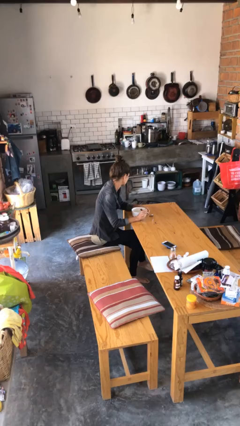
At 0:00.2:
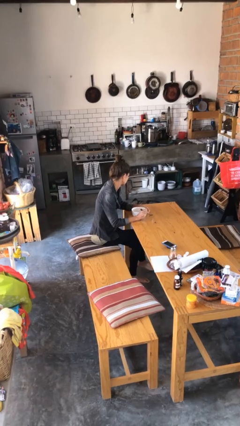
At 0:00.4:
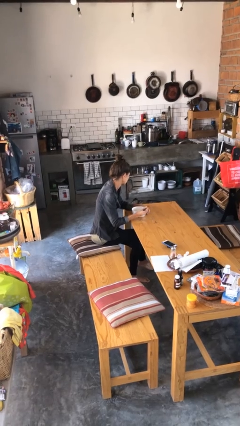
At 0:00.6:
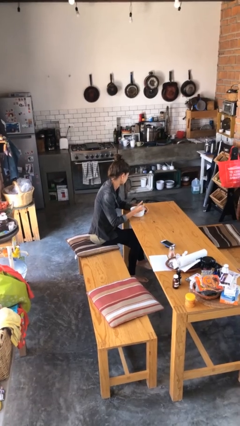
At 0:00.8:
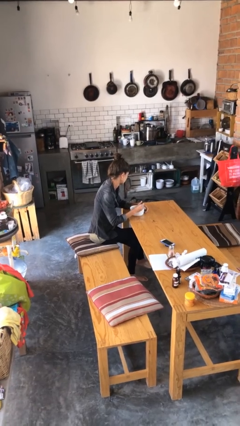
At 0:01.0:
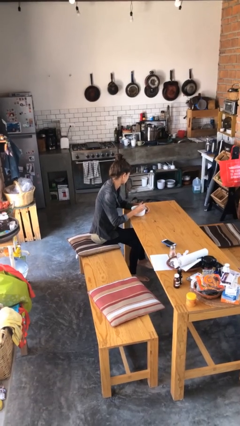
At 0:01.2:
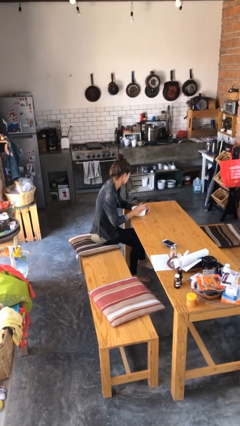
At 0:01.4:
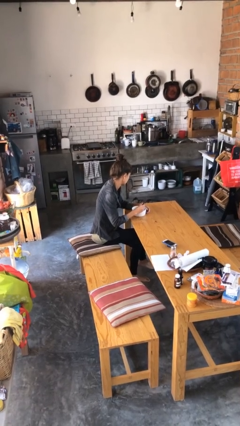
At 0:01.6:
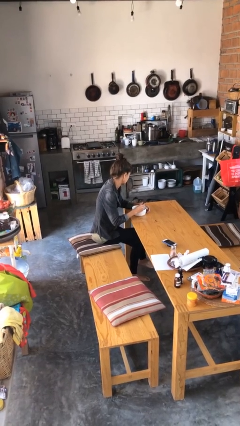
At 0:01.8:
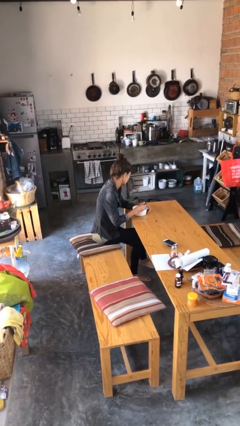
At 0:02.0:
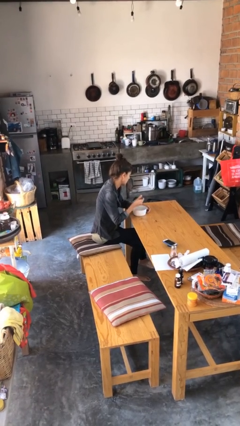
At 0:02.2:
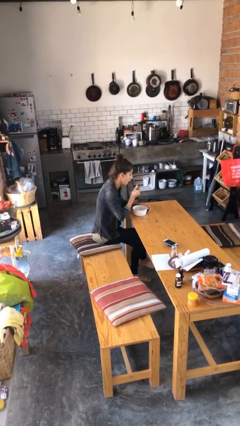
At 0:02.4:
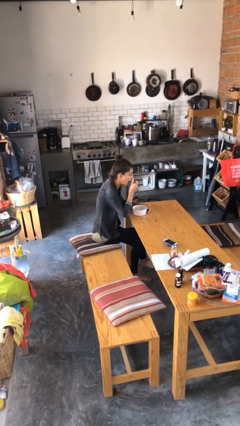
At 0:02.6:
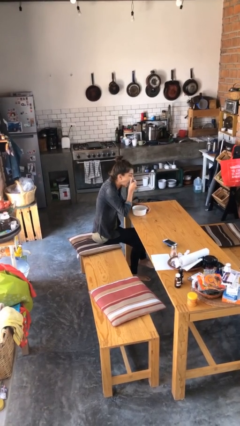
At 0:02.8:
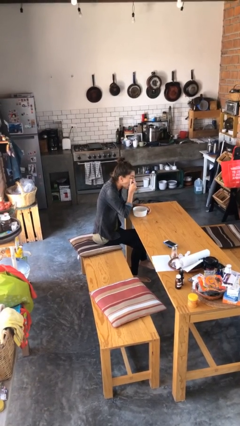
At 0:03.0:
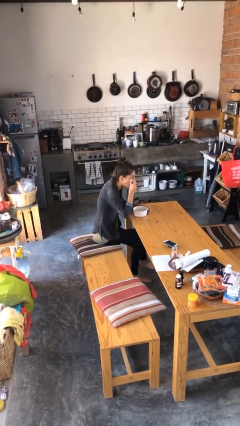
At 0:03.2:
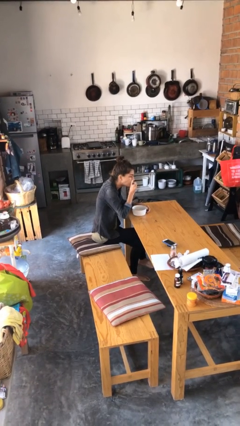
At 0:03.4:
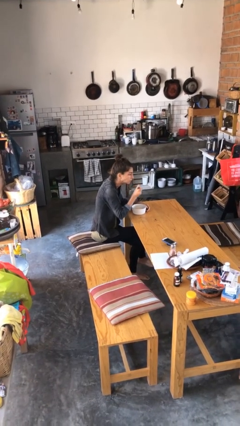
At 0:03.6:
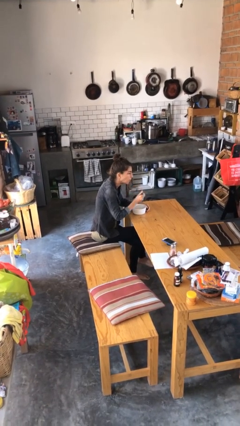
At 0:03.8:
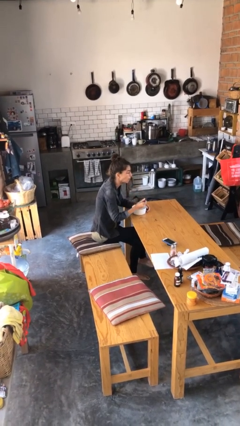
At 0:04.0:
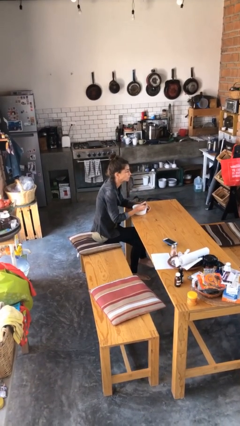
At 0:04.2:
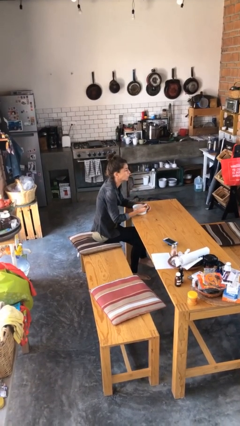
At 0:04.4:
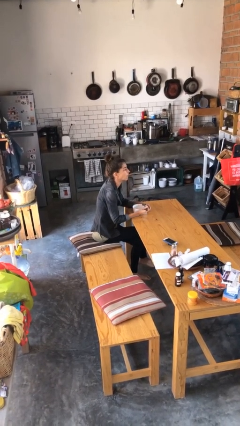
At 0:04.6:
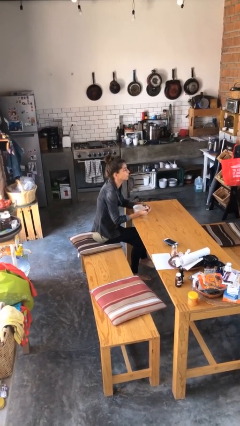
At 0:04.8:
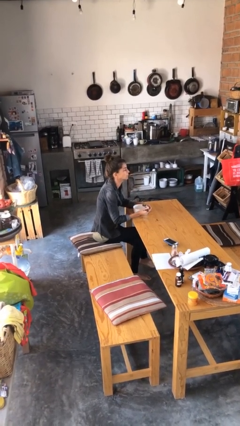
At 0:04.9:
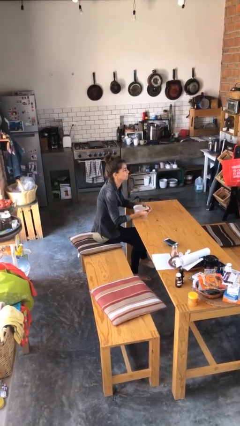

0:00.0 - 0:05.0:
person eats with utensil

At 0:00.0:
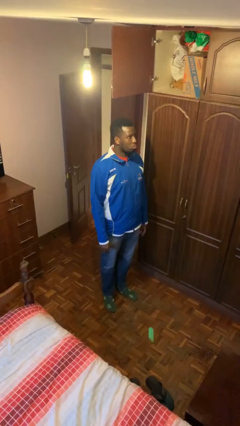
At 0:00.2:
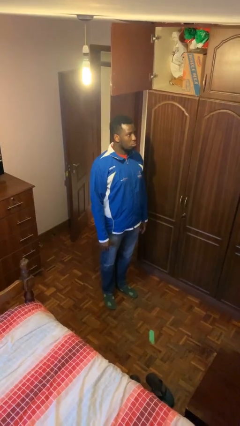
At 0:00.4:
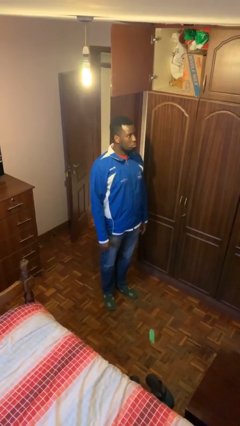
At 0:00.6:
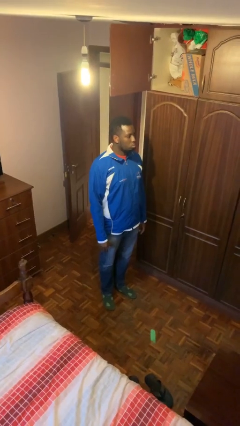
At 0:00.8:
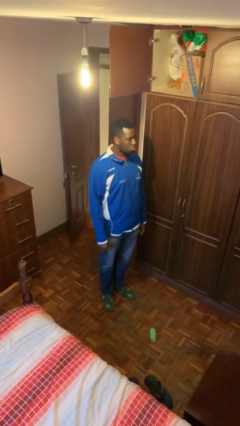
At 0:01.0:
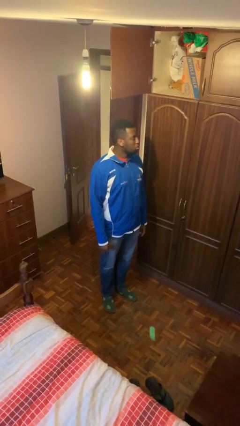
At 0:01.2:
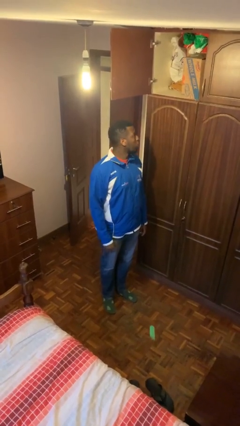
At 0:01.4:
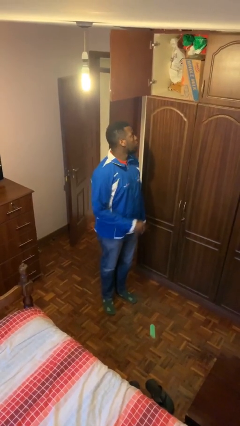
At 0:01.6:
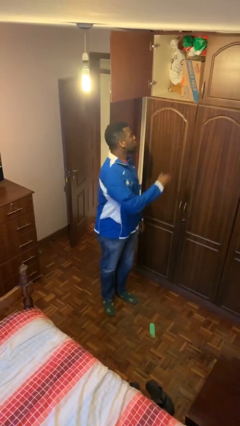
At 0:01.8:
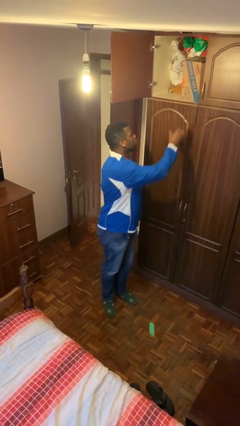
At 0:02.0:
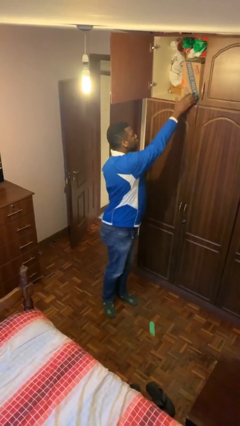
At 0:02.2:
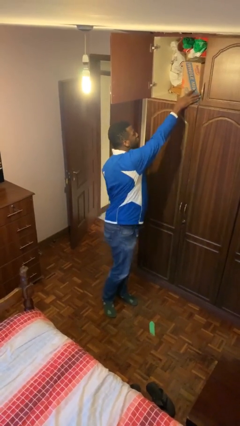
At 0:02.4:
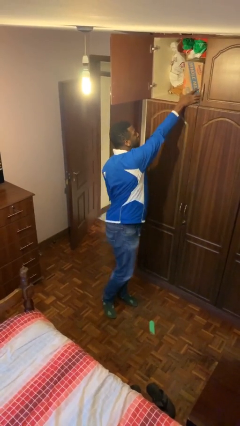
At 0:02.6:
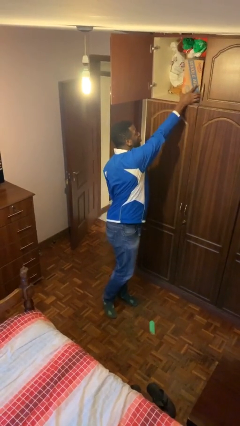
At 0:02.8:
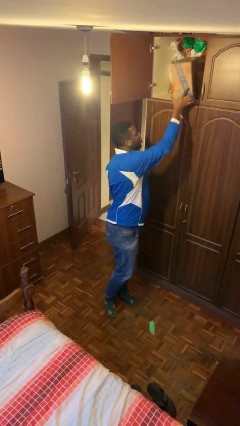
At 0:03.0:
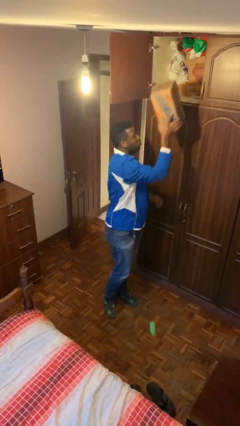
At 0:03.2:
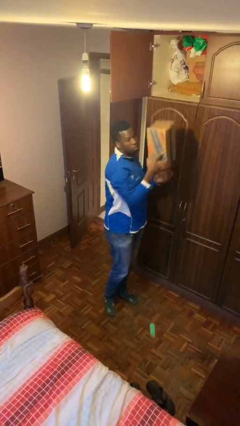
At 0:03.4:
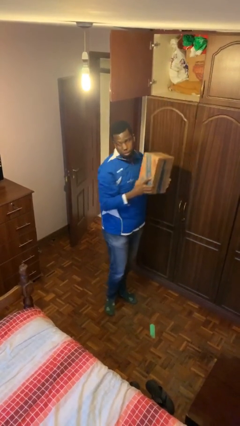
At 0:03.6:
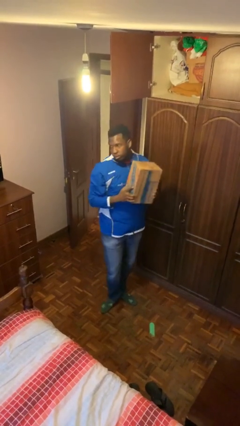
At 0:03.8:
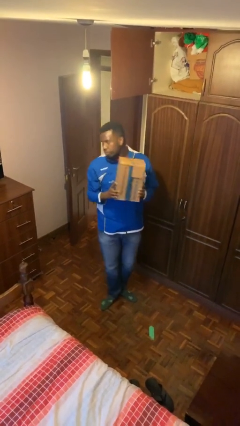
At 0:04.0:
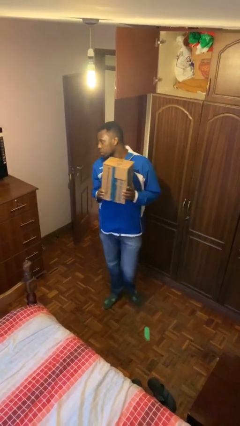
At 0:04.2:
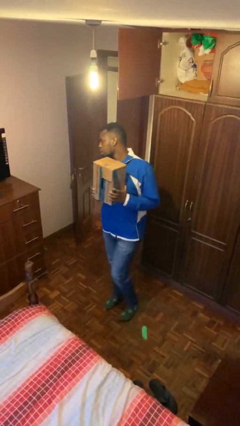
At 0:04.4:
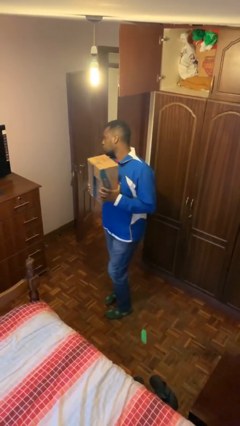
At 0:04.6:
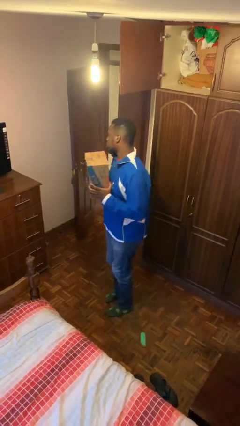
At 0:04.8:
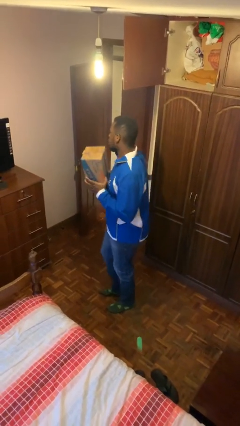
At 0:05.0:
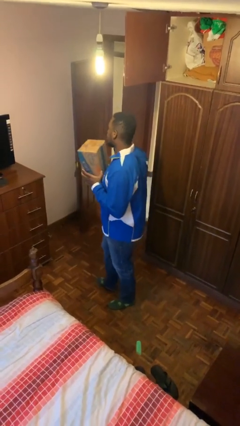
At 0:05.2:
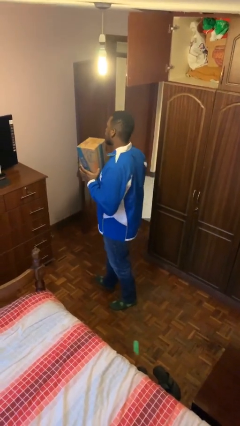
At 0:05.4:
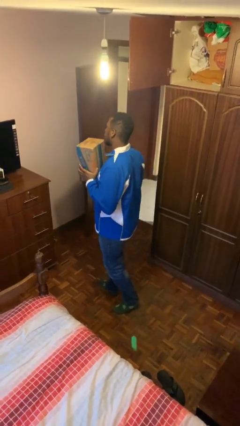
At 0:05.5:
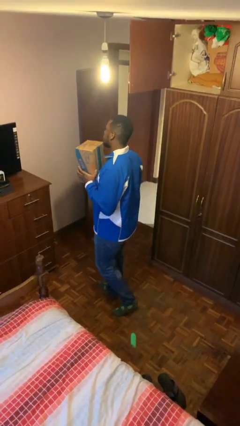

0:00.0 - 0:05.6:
person picks up object from shelf

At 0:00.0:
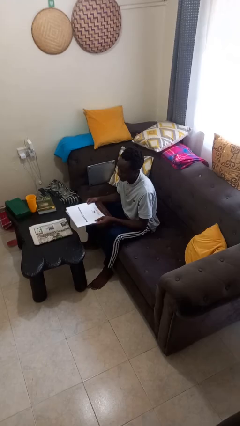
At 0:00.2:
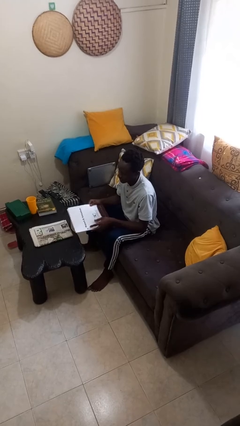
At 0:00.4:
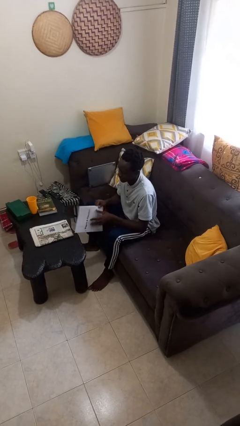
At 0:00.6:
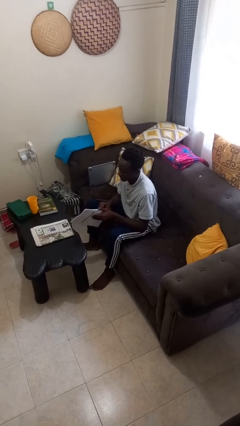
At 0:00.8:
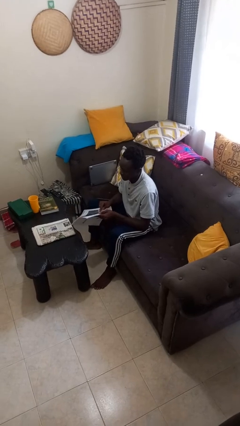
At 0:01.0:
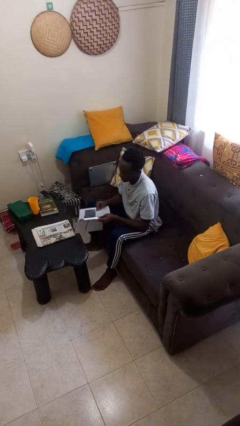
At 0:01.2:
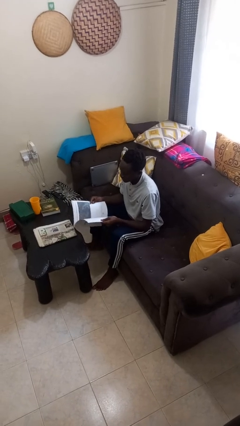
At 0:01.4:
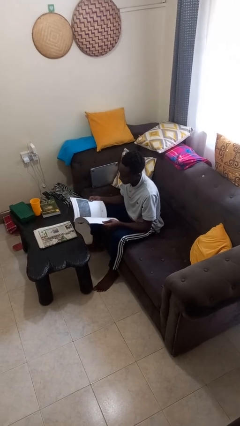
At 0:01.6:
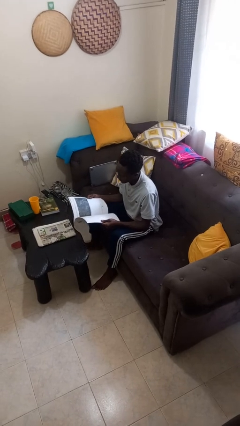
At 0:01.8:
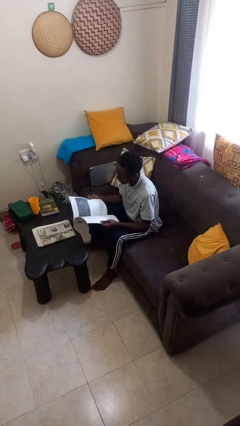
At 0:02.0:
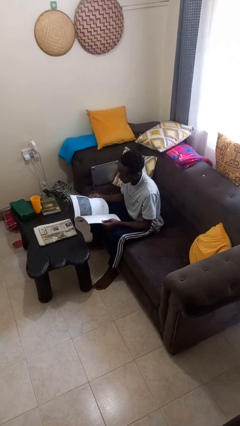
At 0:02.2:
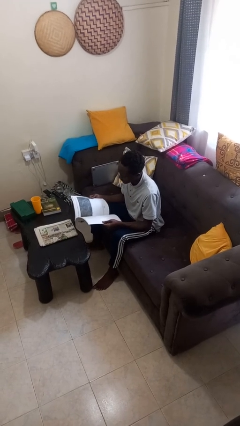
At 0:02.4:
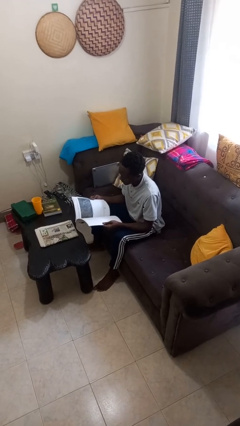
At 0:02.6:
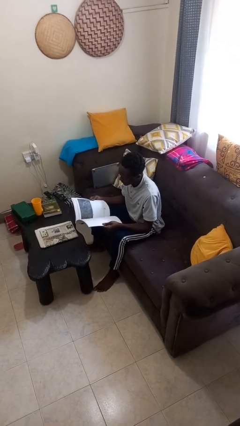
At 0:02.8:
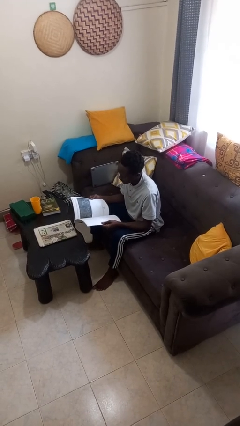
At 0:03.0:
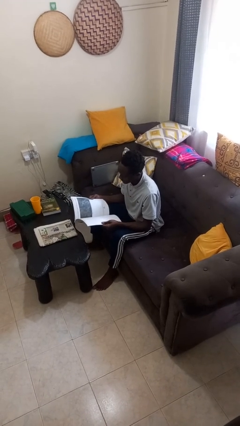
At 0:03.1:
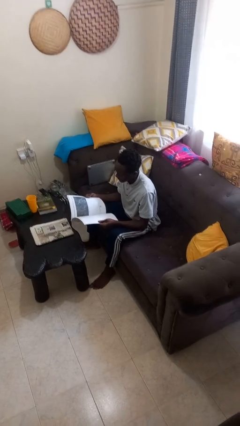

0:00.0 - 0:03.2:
person reads magazine

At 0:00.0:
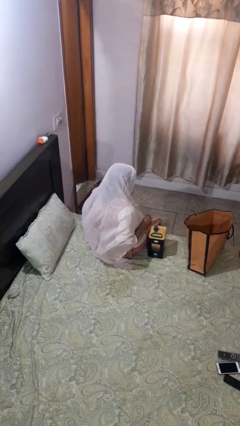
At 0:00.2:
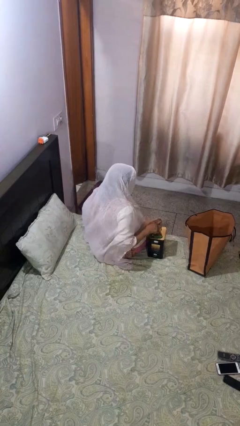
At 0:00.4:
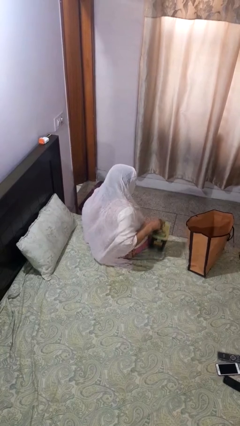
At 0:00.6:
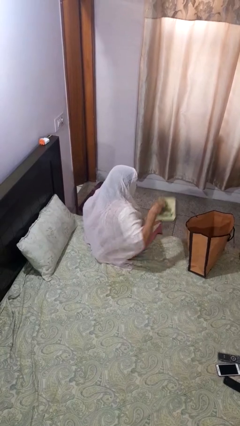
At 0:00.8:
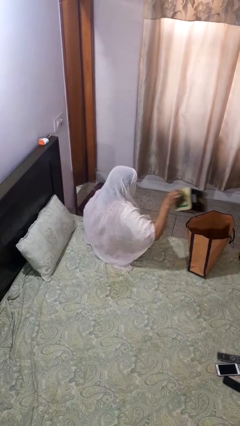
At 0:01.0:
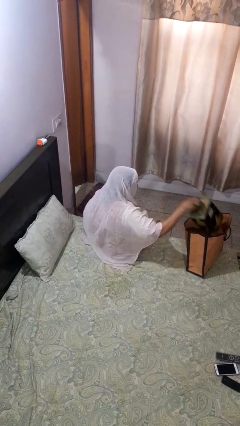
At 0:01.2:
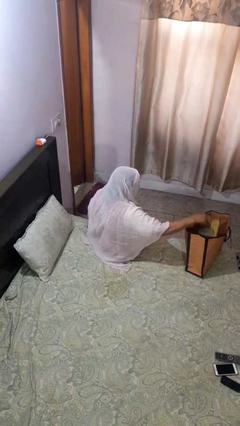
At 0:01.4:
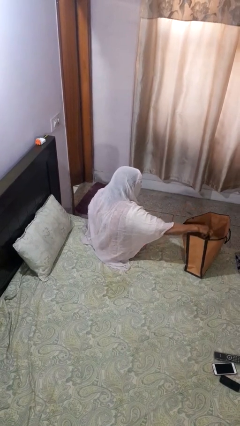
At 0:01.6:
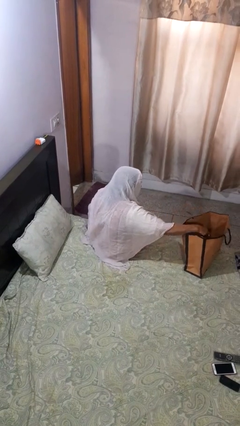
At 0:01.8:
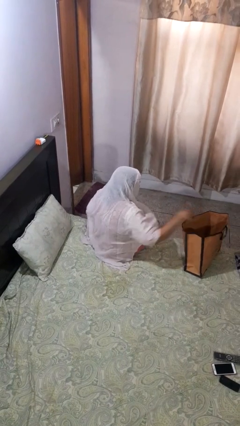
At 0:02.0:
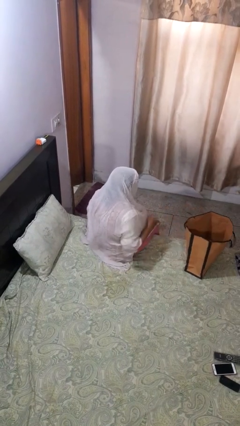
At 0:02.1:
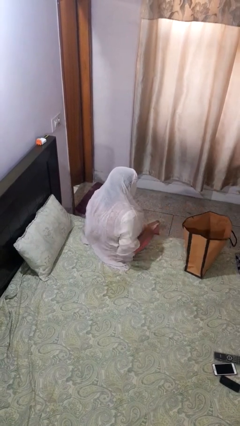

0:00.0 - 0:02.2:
person puts object into bag

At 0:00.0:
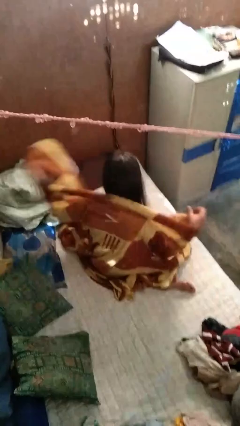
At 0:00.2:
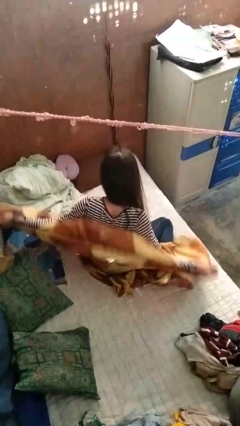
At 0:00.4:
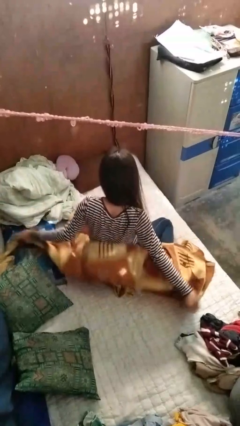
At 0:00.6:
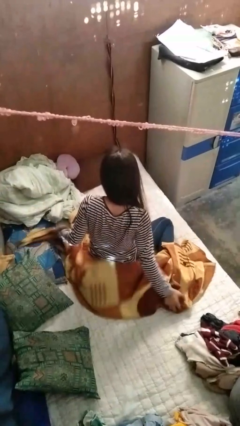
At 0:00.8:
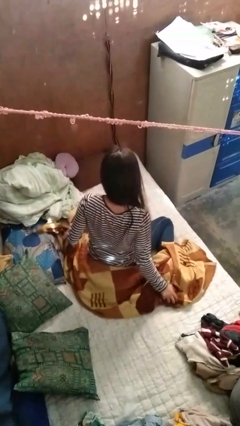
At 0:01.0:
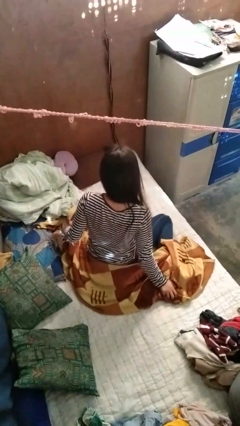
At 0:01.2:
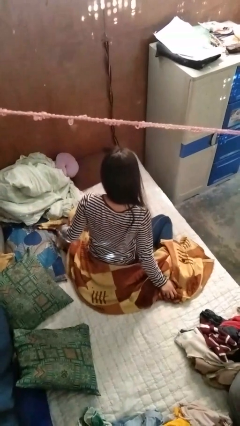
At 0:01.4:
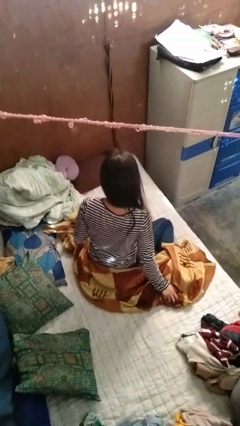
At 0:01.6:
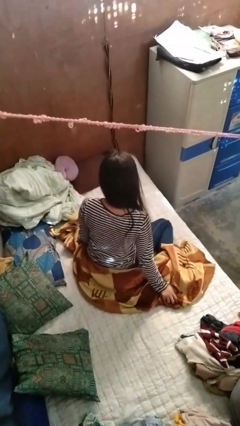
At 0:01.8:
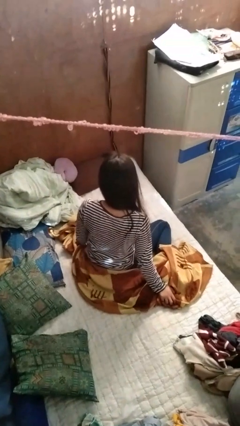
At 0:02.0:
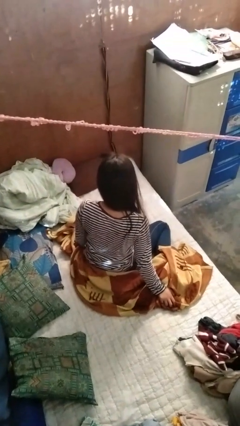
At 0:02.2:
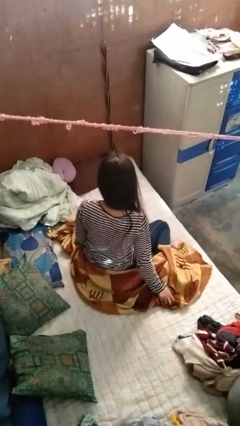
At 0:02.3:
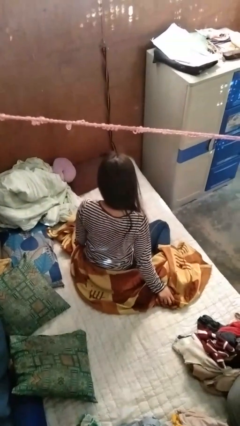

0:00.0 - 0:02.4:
person uncovers with blanket
